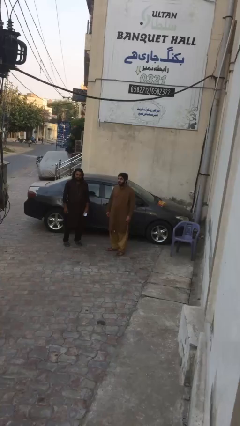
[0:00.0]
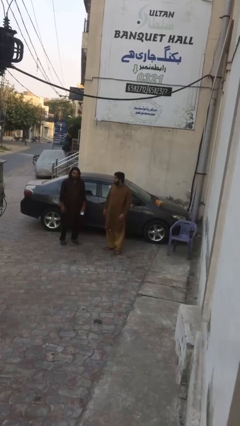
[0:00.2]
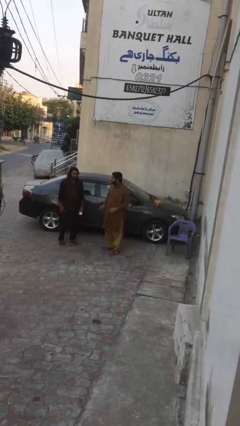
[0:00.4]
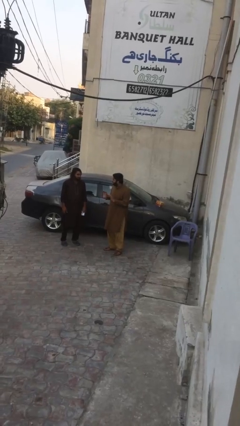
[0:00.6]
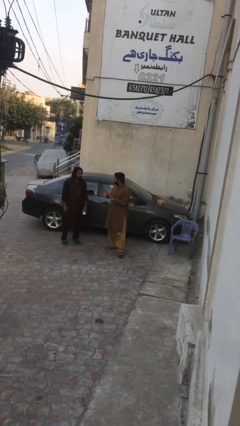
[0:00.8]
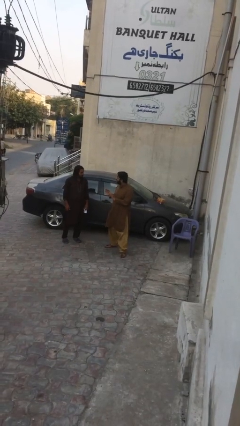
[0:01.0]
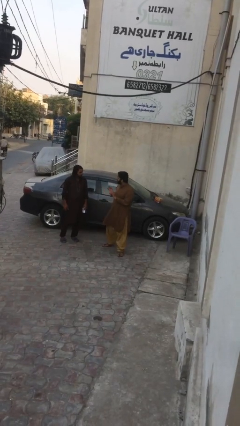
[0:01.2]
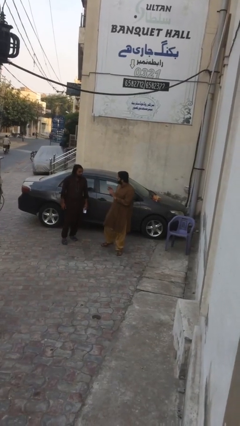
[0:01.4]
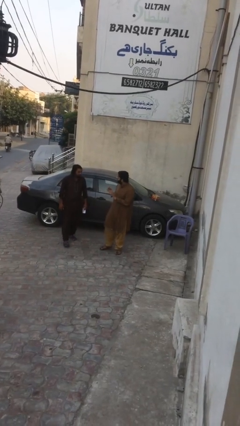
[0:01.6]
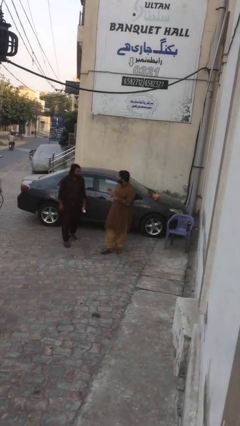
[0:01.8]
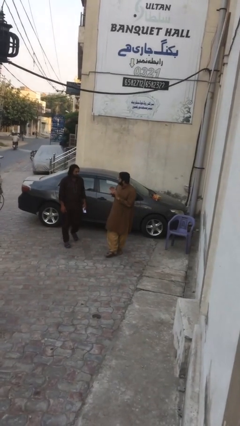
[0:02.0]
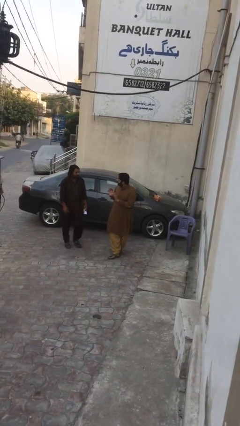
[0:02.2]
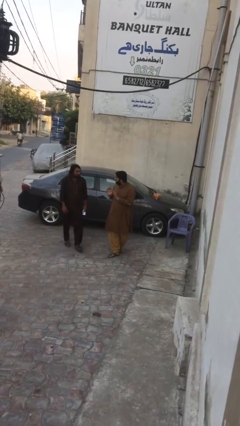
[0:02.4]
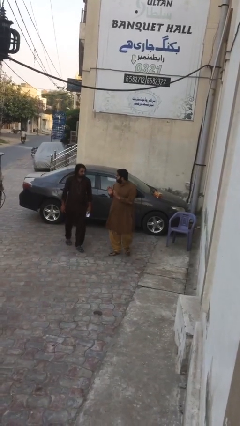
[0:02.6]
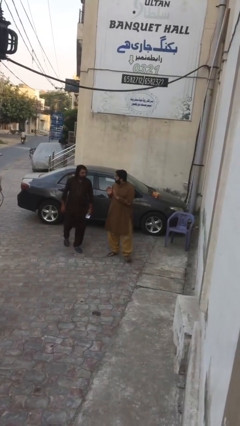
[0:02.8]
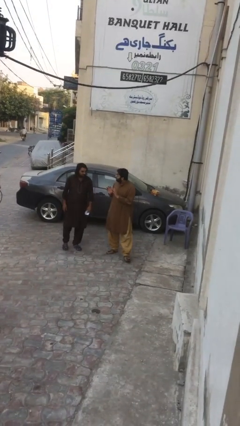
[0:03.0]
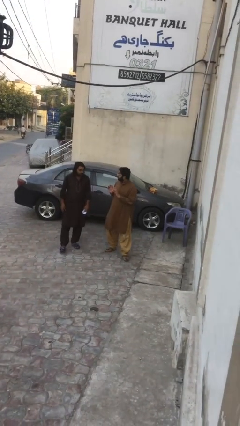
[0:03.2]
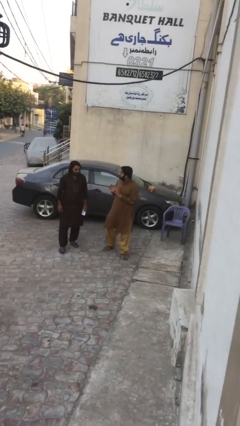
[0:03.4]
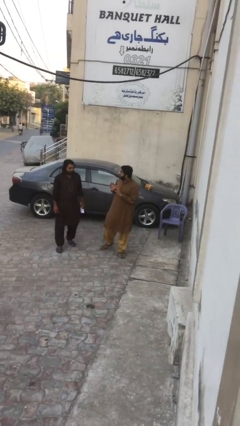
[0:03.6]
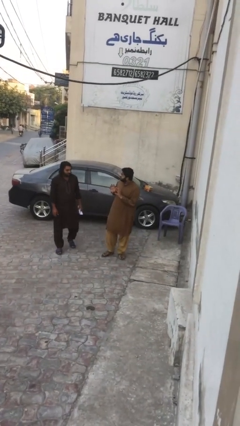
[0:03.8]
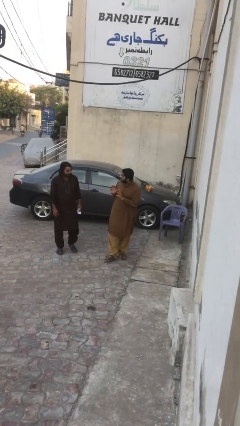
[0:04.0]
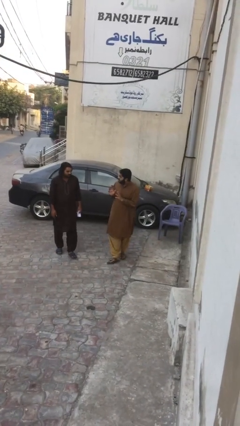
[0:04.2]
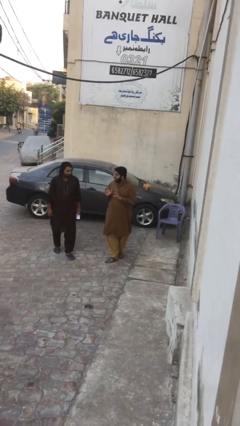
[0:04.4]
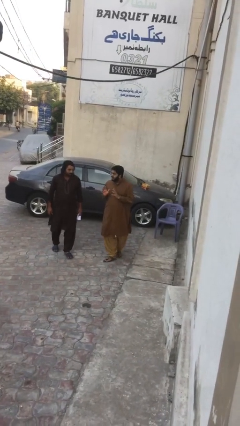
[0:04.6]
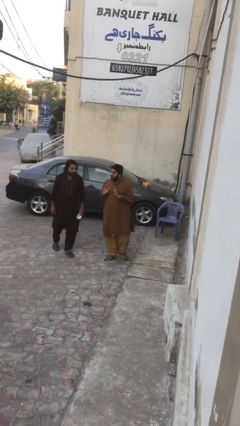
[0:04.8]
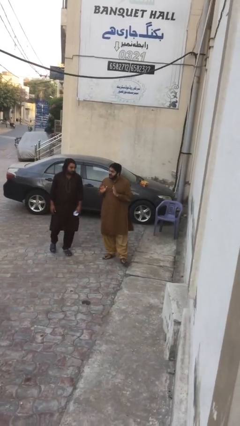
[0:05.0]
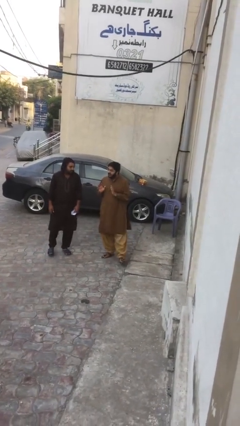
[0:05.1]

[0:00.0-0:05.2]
person talks to person

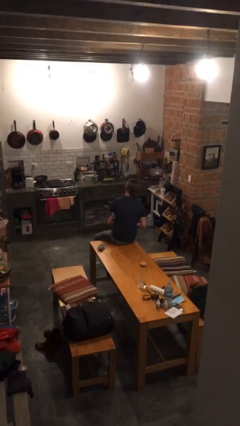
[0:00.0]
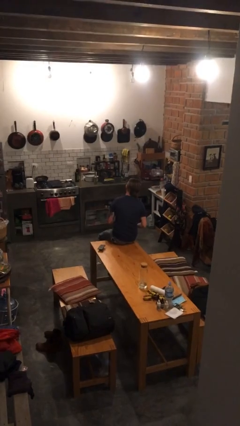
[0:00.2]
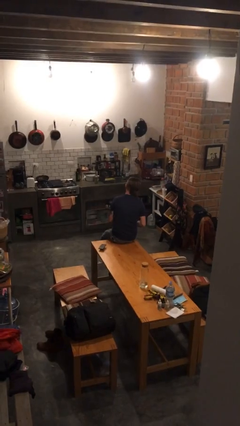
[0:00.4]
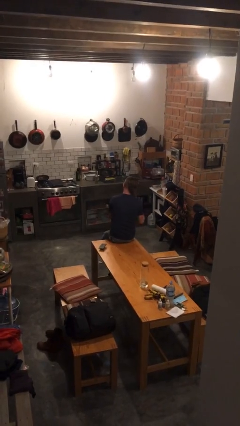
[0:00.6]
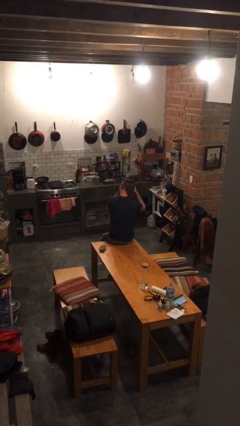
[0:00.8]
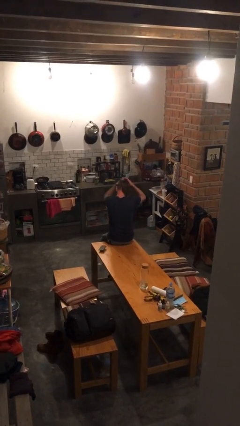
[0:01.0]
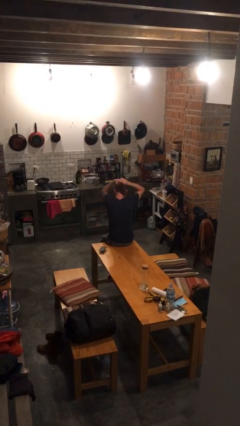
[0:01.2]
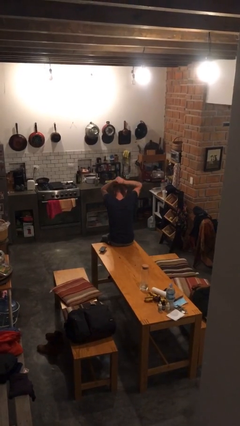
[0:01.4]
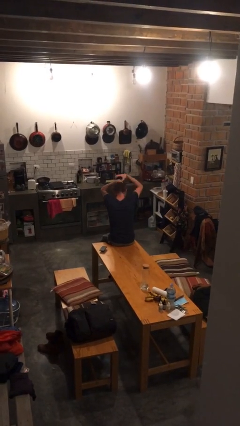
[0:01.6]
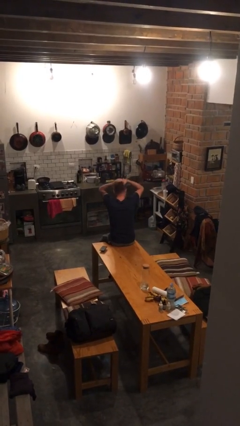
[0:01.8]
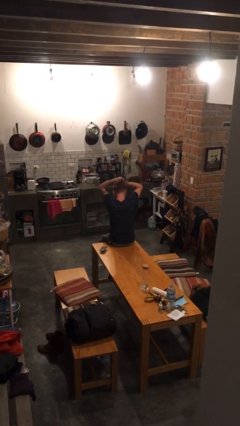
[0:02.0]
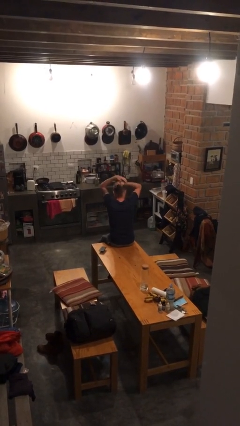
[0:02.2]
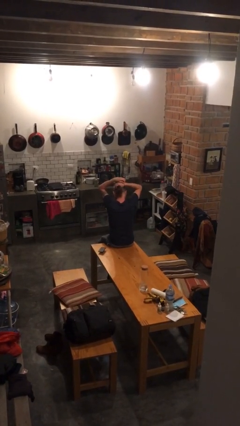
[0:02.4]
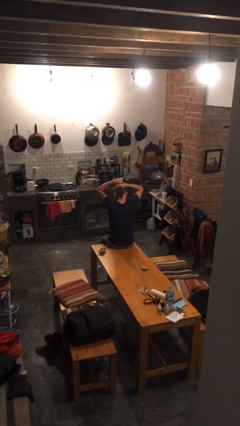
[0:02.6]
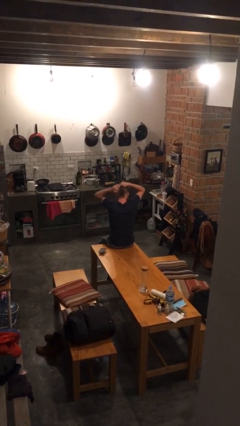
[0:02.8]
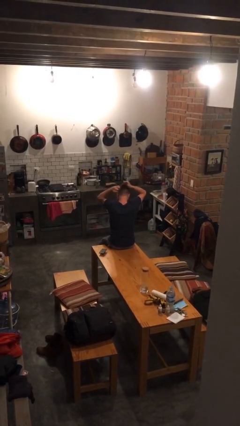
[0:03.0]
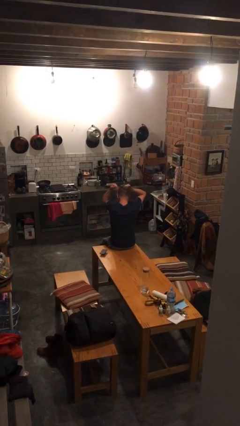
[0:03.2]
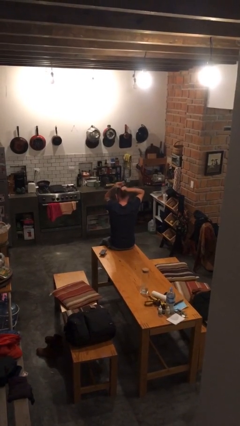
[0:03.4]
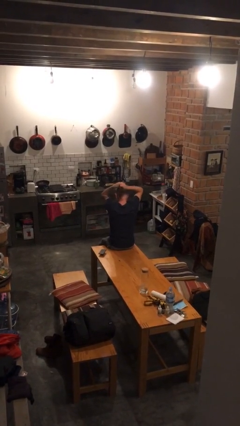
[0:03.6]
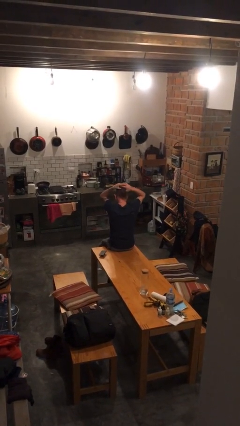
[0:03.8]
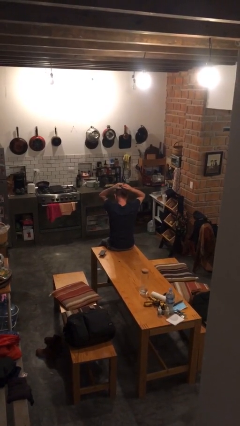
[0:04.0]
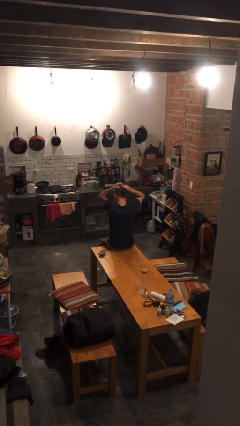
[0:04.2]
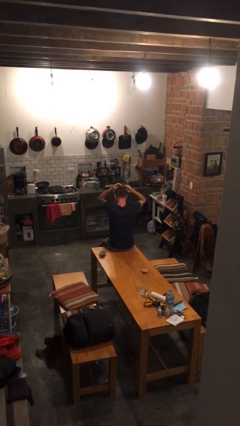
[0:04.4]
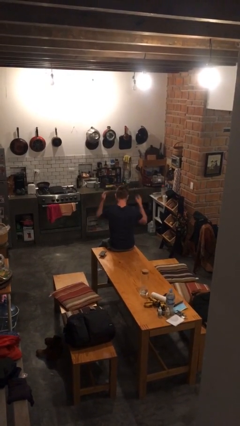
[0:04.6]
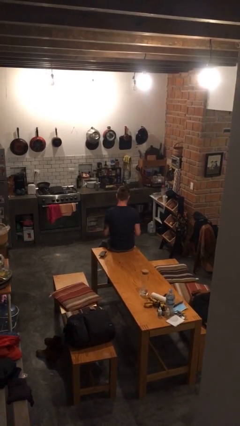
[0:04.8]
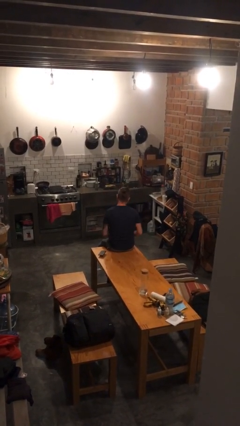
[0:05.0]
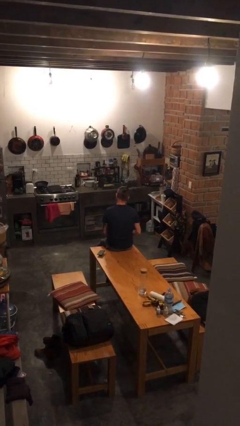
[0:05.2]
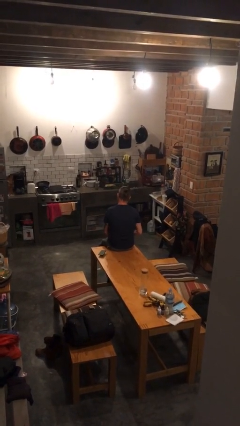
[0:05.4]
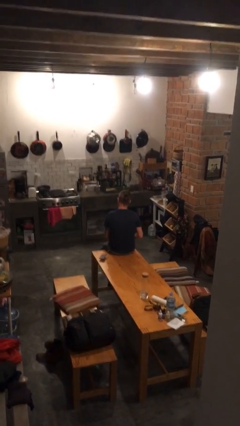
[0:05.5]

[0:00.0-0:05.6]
person puts hair in ponytail

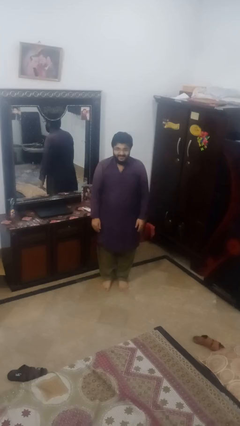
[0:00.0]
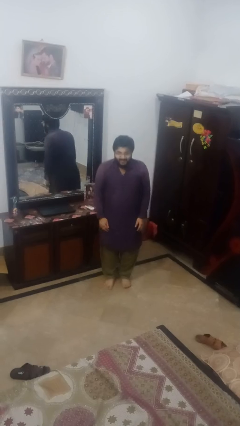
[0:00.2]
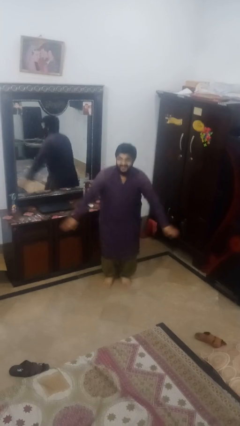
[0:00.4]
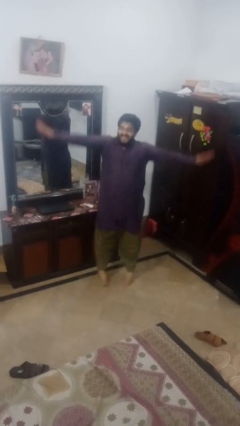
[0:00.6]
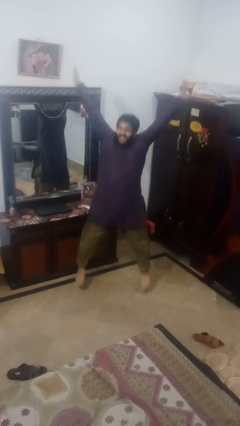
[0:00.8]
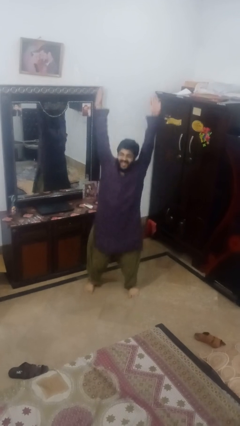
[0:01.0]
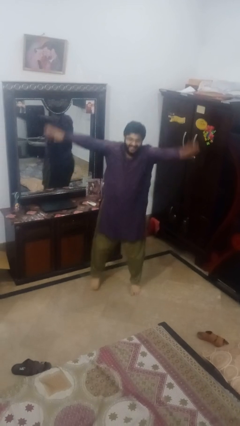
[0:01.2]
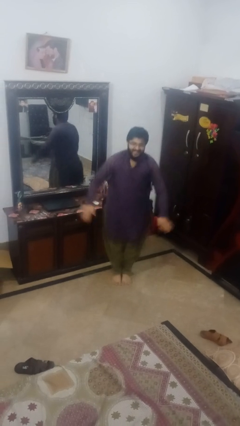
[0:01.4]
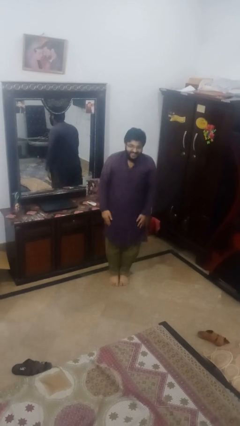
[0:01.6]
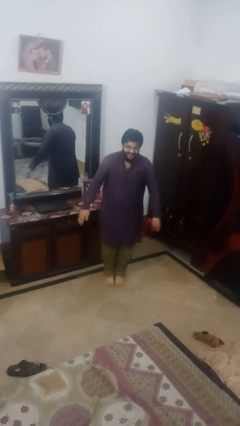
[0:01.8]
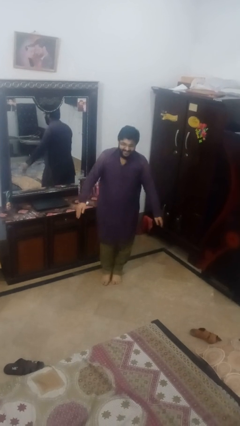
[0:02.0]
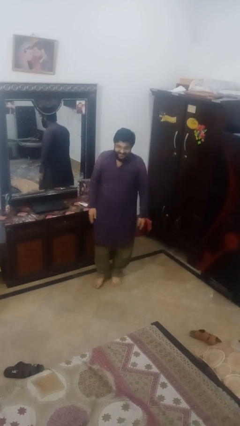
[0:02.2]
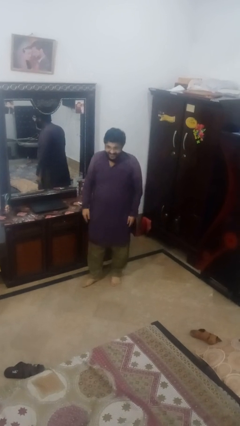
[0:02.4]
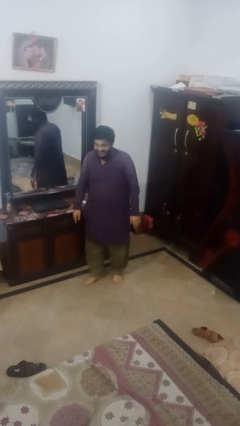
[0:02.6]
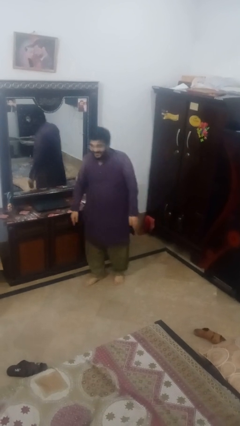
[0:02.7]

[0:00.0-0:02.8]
person exercises with jumping jacks

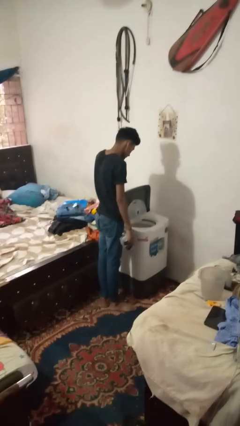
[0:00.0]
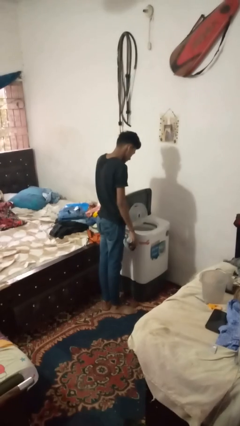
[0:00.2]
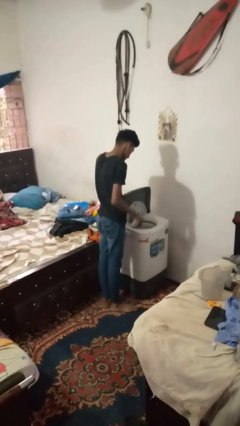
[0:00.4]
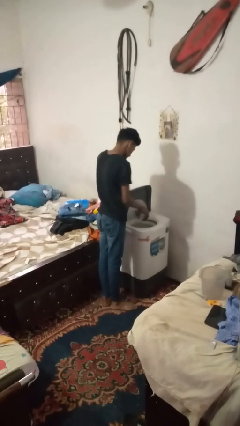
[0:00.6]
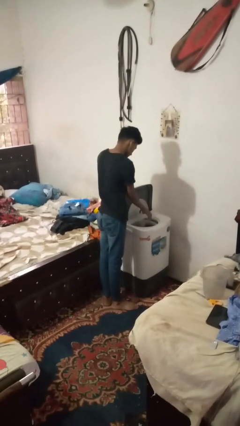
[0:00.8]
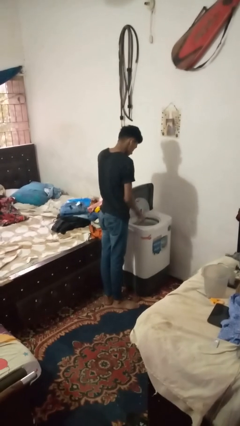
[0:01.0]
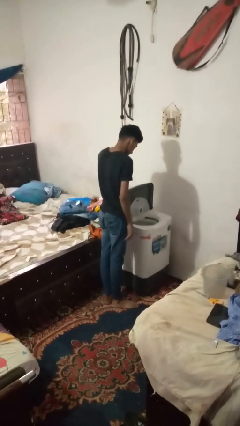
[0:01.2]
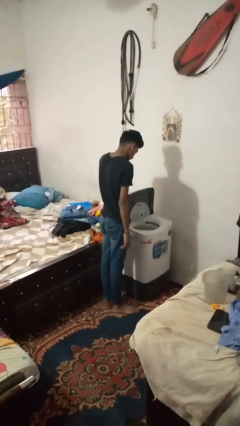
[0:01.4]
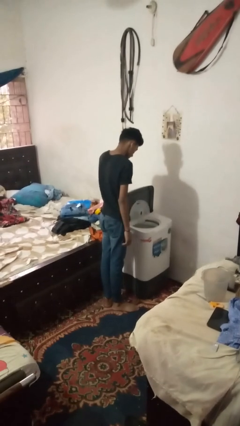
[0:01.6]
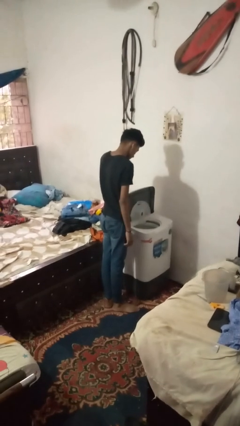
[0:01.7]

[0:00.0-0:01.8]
person loads dryer

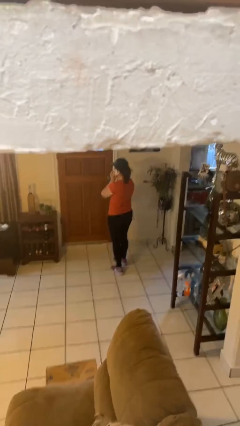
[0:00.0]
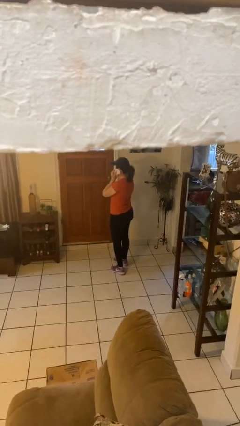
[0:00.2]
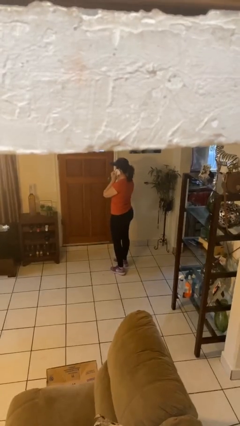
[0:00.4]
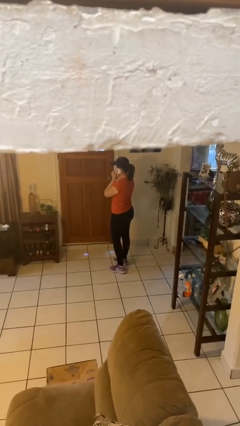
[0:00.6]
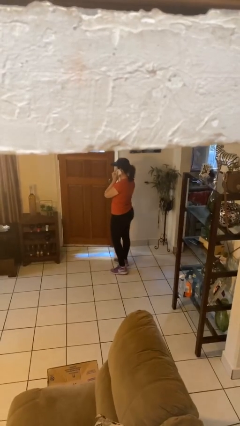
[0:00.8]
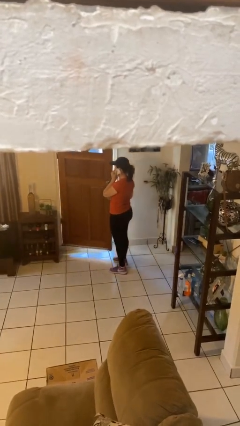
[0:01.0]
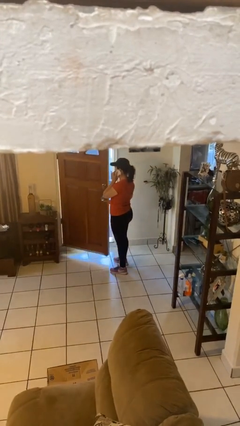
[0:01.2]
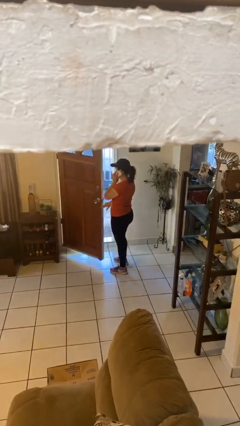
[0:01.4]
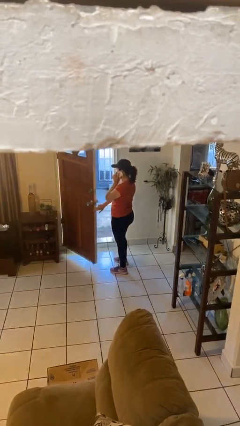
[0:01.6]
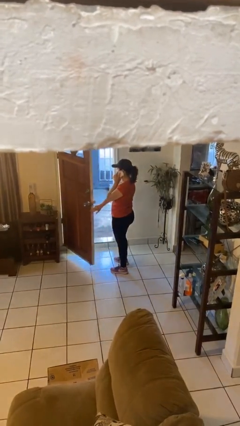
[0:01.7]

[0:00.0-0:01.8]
person opens facility door
